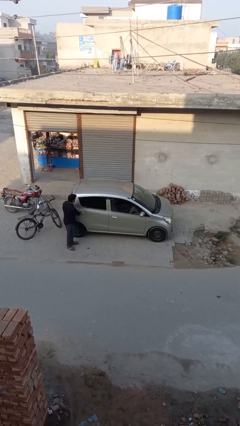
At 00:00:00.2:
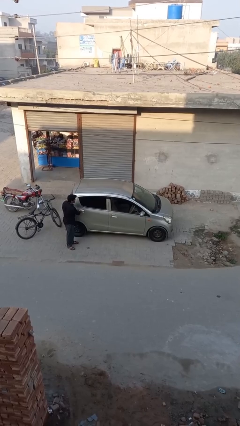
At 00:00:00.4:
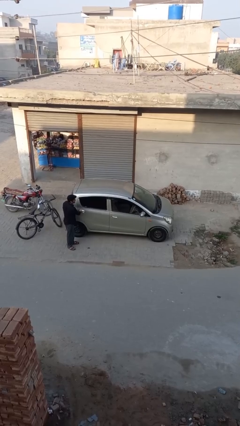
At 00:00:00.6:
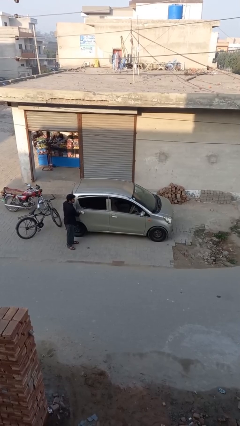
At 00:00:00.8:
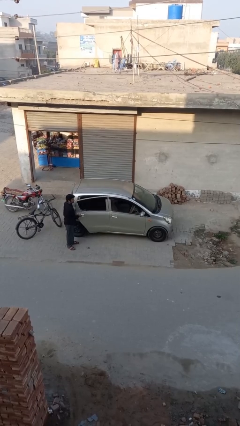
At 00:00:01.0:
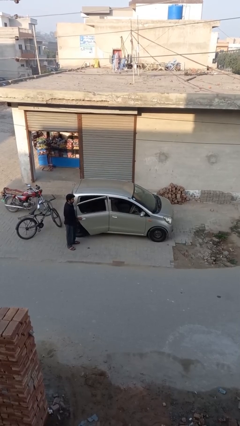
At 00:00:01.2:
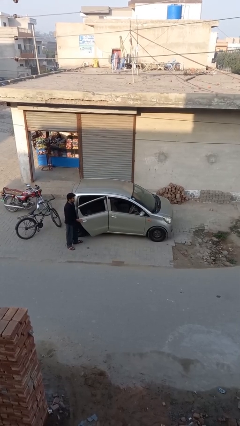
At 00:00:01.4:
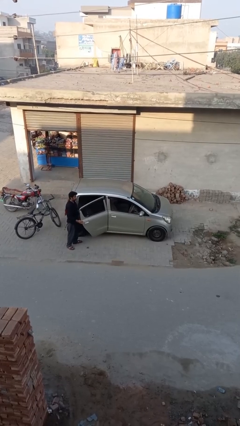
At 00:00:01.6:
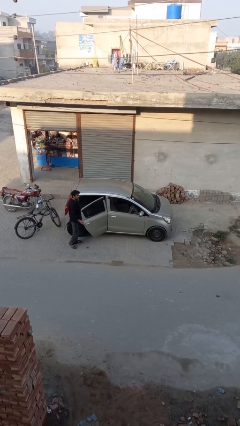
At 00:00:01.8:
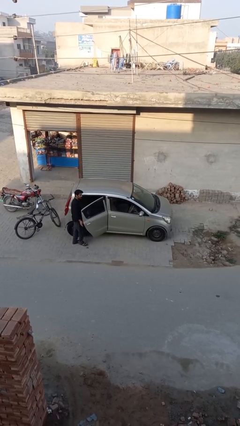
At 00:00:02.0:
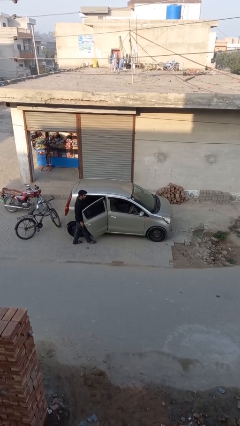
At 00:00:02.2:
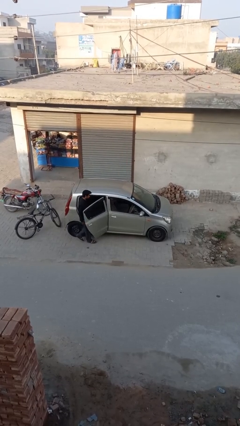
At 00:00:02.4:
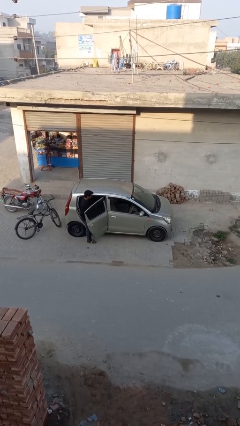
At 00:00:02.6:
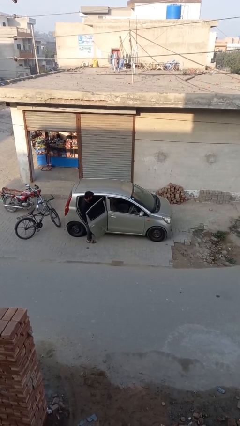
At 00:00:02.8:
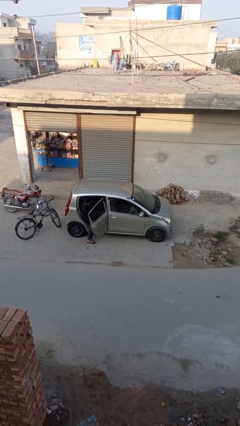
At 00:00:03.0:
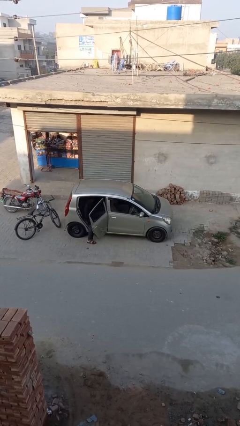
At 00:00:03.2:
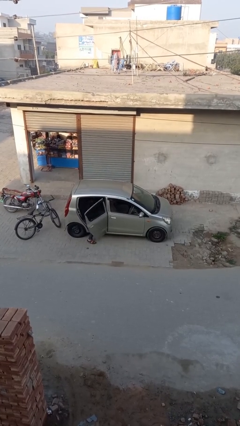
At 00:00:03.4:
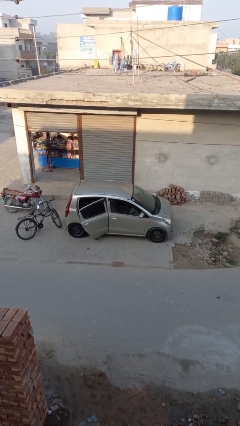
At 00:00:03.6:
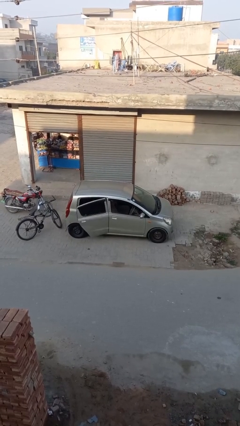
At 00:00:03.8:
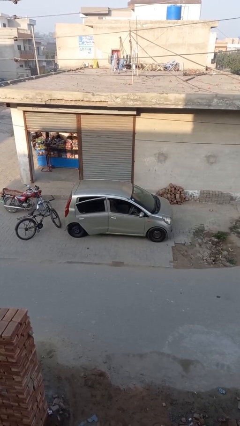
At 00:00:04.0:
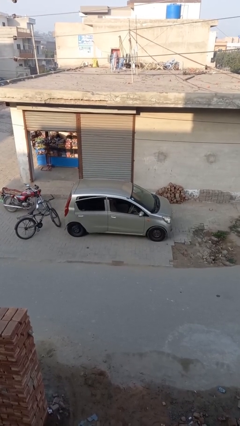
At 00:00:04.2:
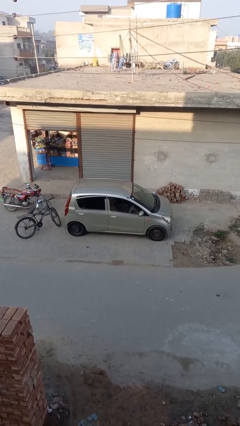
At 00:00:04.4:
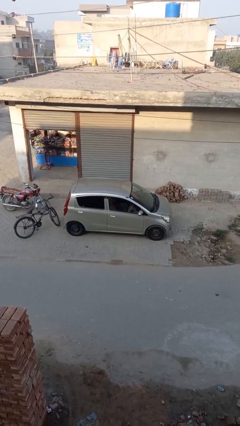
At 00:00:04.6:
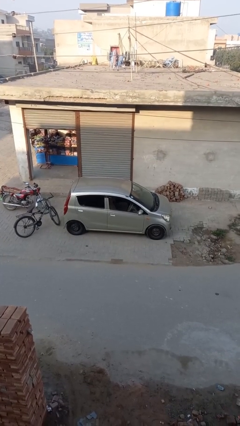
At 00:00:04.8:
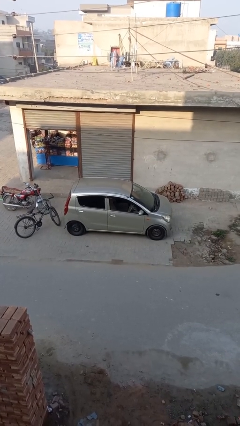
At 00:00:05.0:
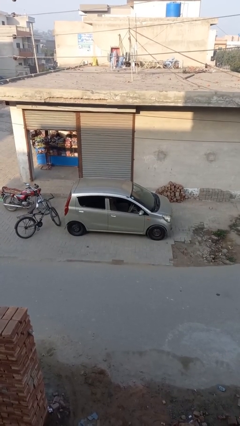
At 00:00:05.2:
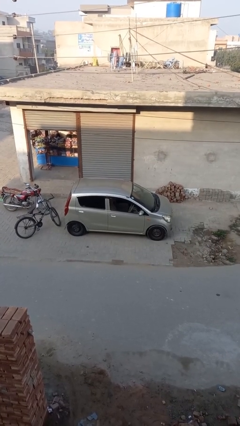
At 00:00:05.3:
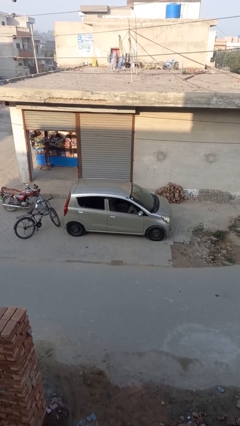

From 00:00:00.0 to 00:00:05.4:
car picks up person

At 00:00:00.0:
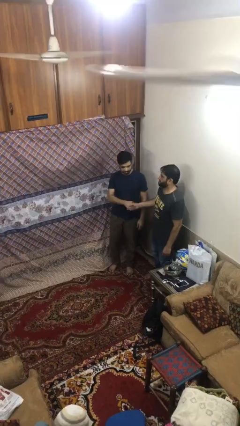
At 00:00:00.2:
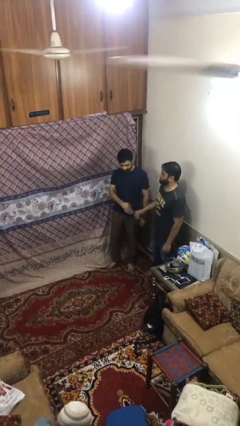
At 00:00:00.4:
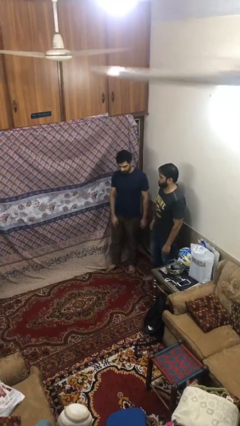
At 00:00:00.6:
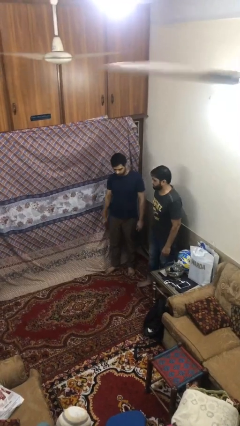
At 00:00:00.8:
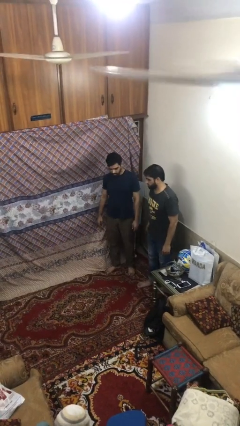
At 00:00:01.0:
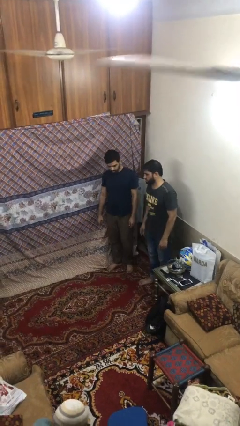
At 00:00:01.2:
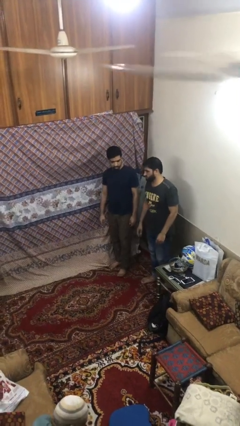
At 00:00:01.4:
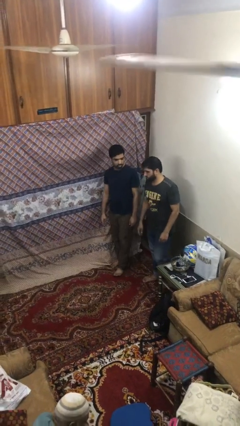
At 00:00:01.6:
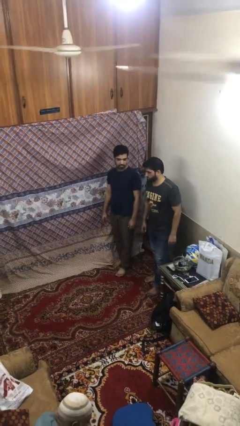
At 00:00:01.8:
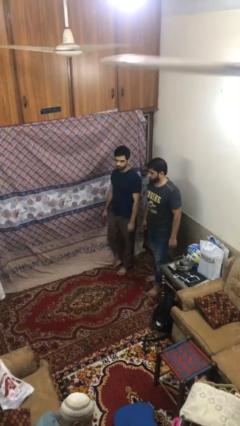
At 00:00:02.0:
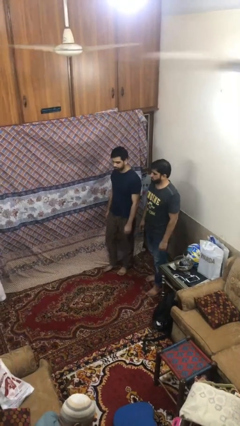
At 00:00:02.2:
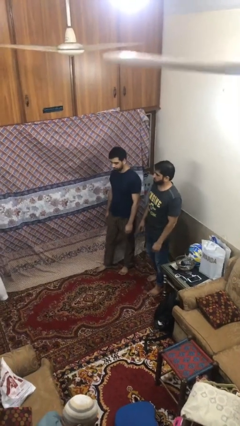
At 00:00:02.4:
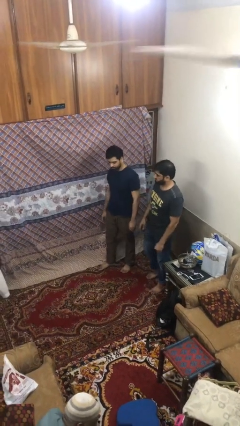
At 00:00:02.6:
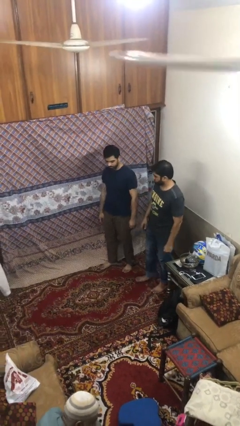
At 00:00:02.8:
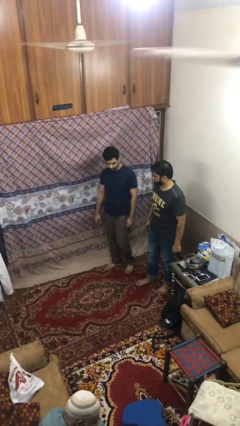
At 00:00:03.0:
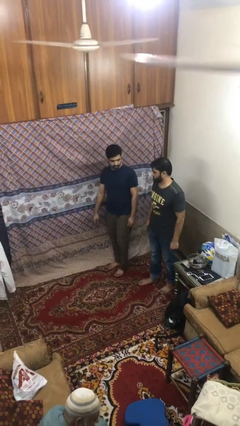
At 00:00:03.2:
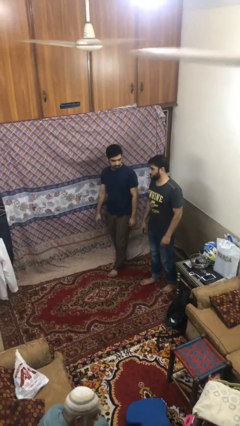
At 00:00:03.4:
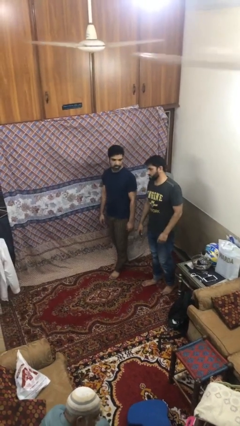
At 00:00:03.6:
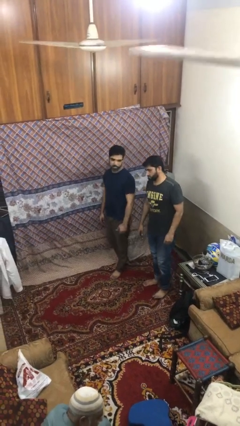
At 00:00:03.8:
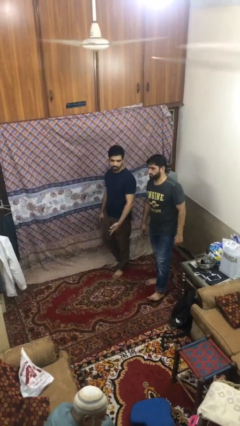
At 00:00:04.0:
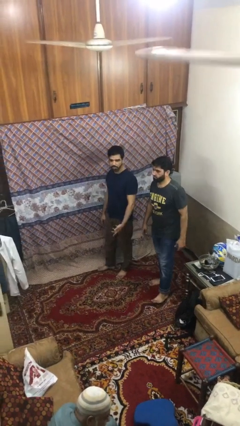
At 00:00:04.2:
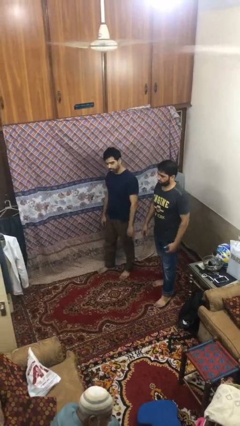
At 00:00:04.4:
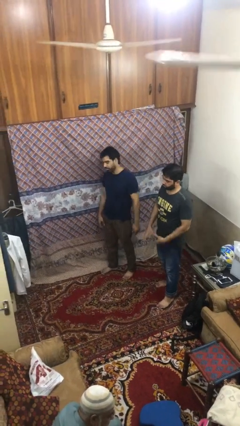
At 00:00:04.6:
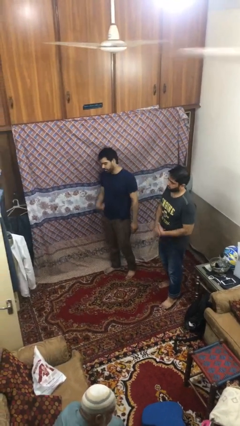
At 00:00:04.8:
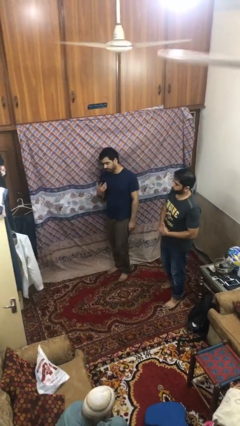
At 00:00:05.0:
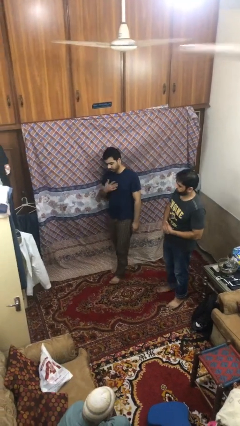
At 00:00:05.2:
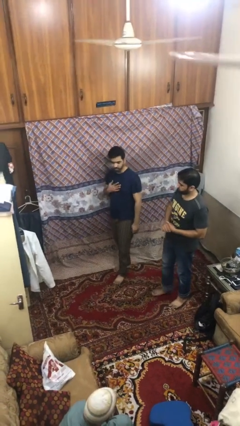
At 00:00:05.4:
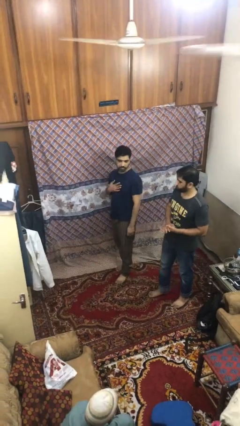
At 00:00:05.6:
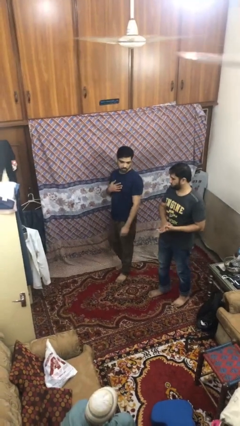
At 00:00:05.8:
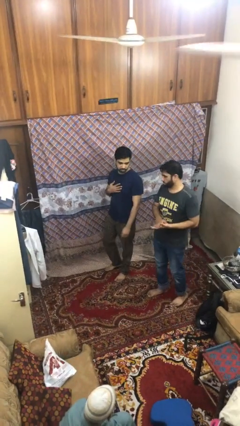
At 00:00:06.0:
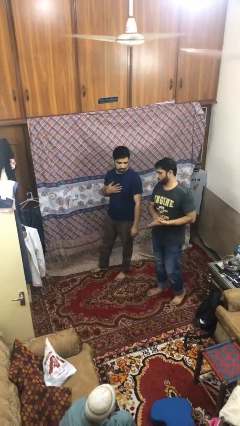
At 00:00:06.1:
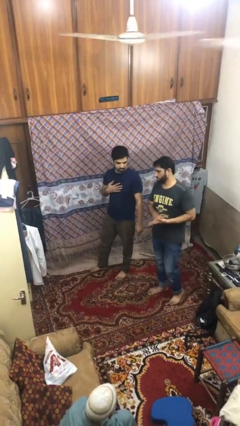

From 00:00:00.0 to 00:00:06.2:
person talks to person

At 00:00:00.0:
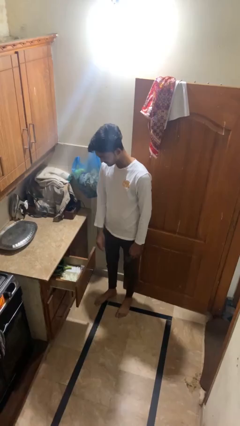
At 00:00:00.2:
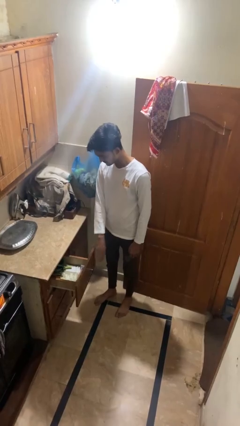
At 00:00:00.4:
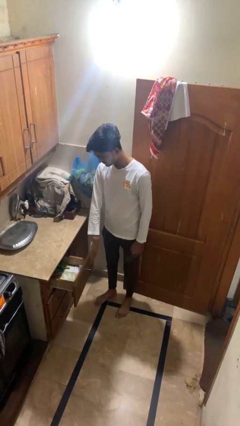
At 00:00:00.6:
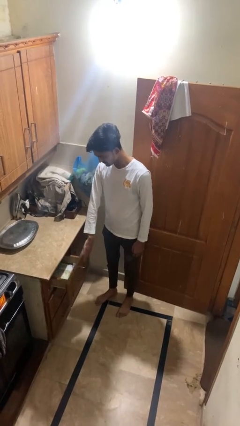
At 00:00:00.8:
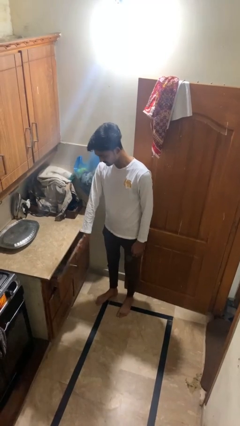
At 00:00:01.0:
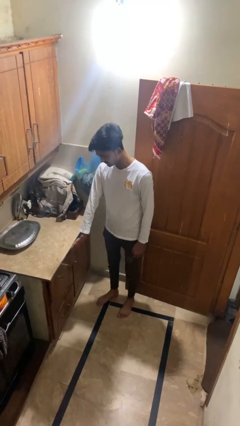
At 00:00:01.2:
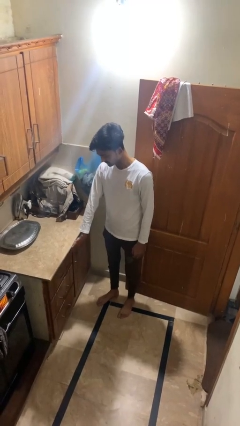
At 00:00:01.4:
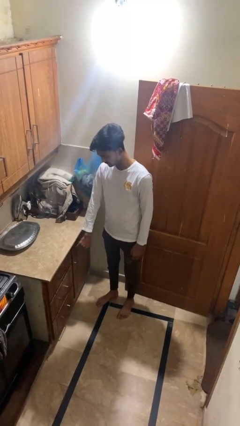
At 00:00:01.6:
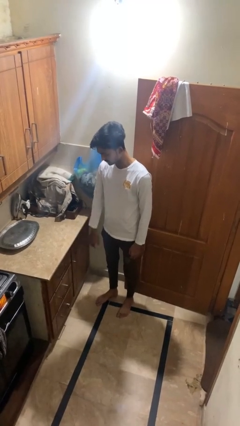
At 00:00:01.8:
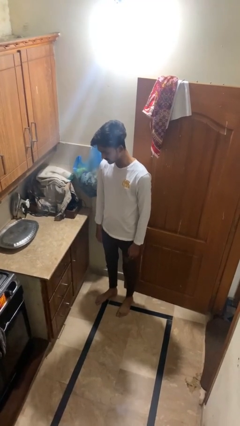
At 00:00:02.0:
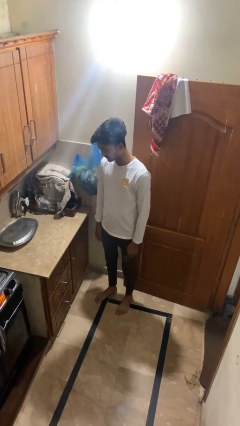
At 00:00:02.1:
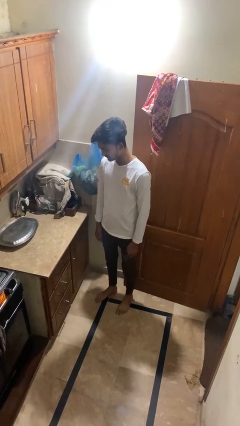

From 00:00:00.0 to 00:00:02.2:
person closes kitchen drawer

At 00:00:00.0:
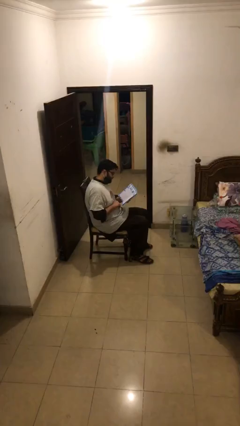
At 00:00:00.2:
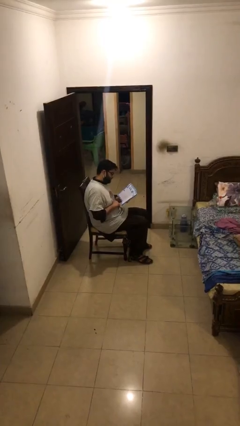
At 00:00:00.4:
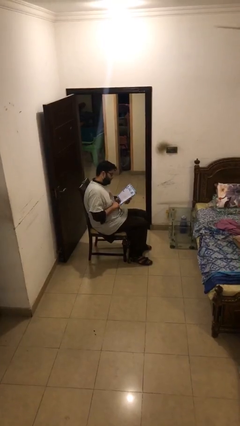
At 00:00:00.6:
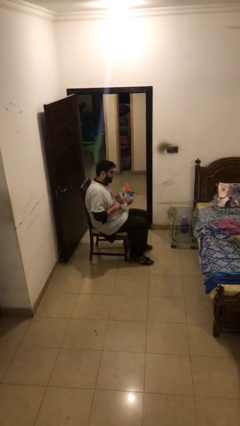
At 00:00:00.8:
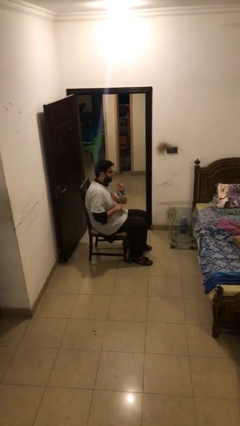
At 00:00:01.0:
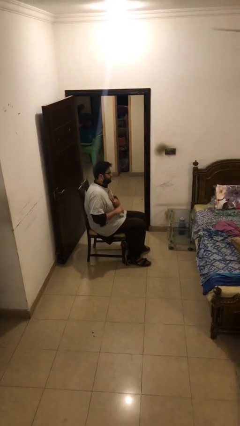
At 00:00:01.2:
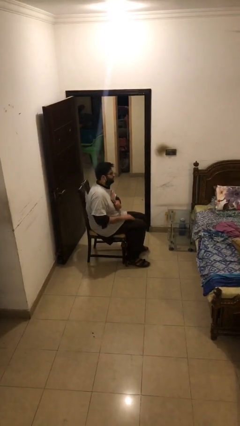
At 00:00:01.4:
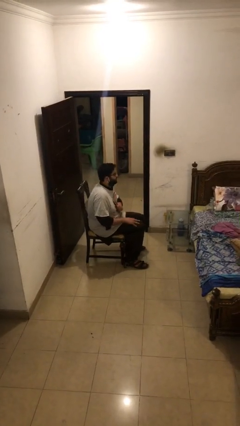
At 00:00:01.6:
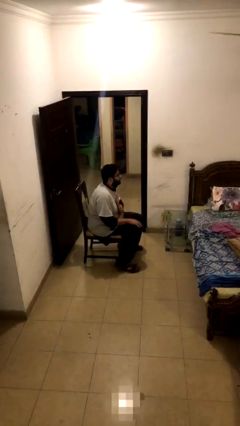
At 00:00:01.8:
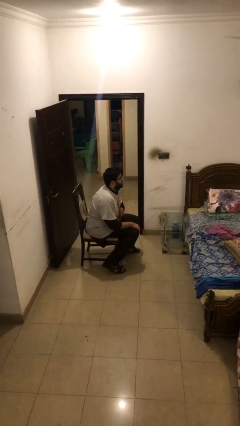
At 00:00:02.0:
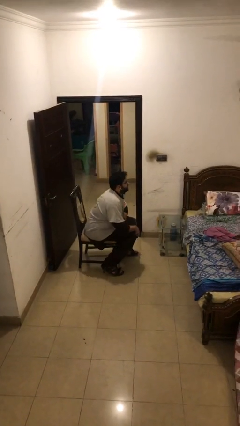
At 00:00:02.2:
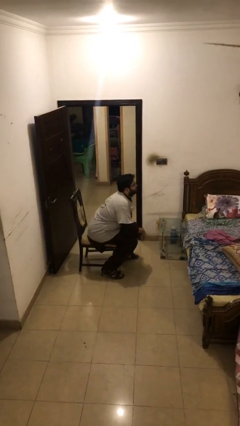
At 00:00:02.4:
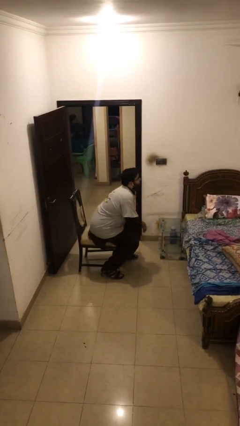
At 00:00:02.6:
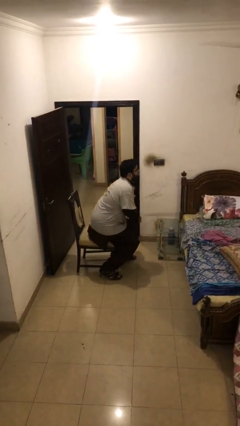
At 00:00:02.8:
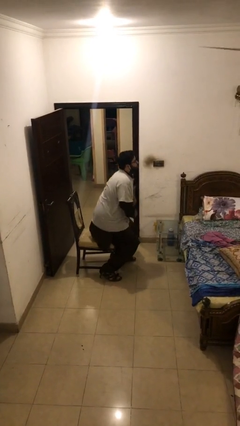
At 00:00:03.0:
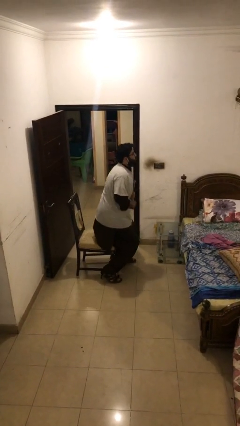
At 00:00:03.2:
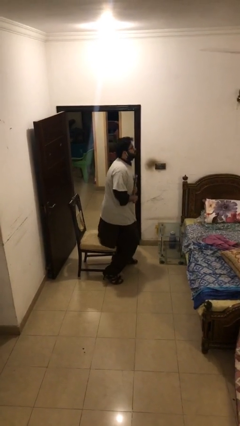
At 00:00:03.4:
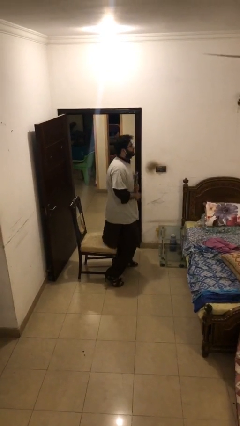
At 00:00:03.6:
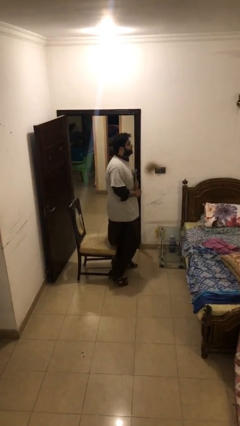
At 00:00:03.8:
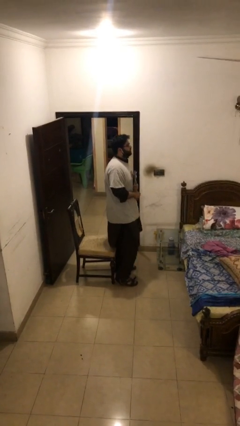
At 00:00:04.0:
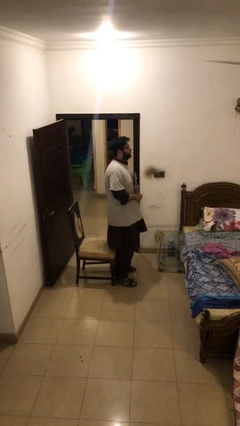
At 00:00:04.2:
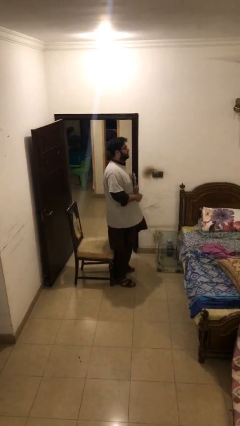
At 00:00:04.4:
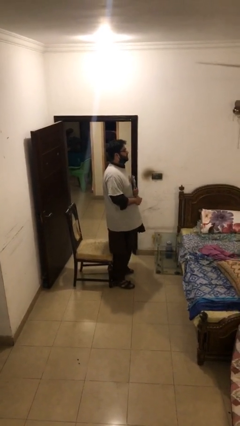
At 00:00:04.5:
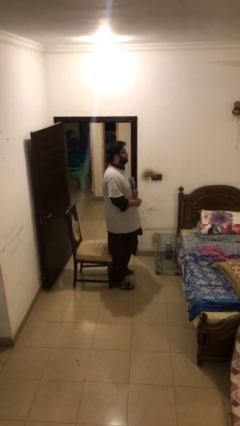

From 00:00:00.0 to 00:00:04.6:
person stands up
